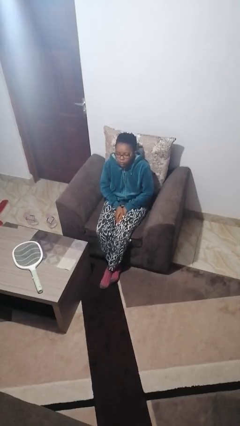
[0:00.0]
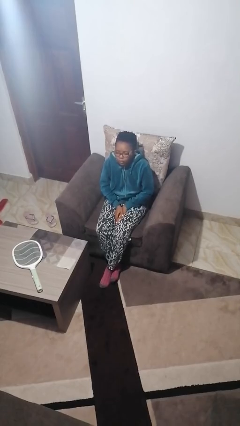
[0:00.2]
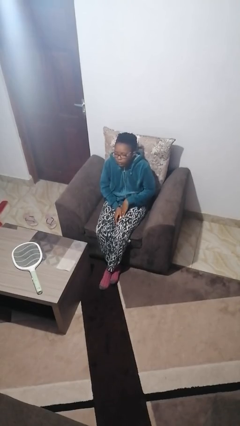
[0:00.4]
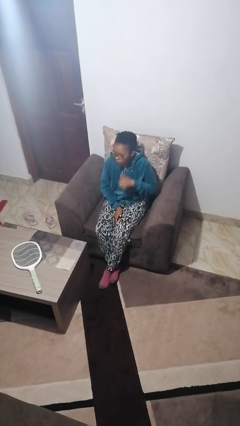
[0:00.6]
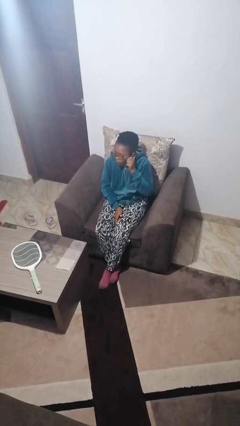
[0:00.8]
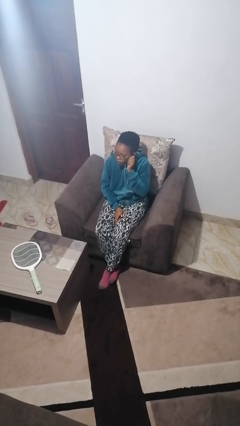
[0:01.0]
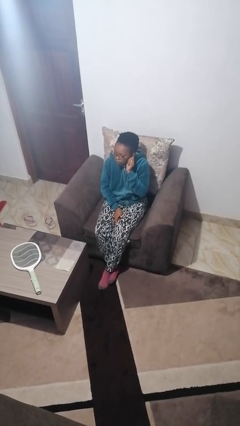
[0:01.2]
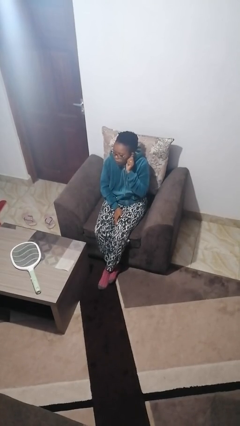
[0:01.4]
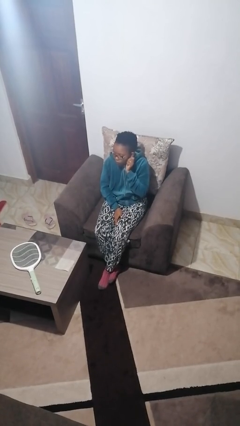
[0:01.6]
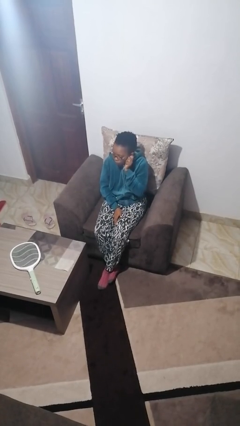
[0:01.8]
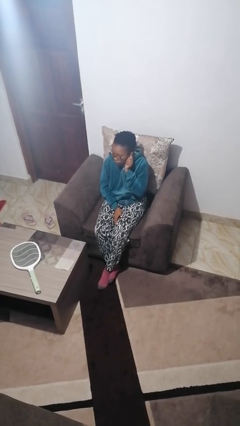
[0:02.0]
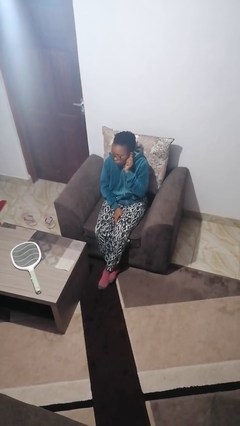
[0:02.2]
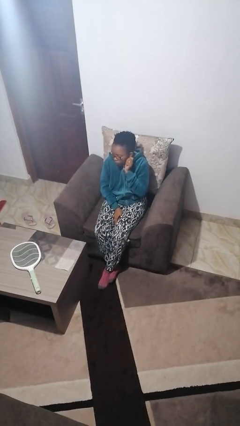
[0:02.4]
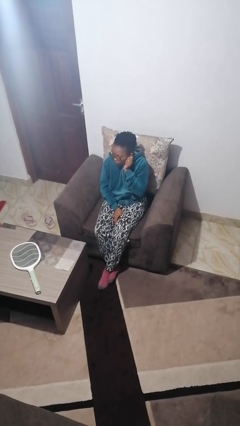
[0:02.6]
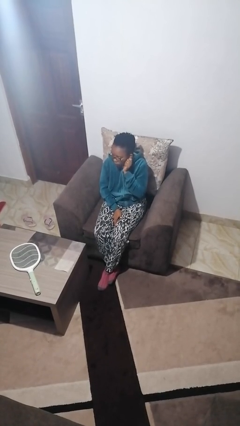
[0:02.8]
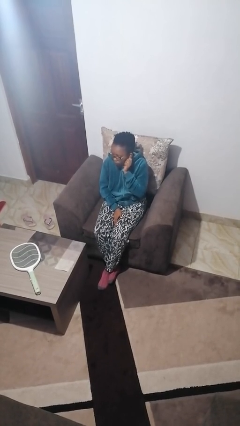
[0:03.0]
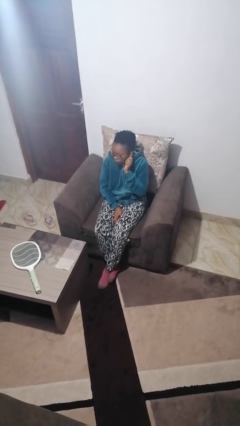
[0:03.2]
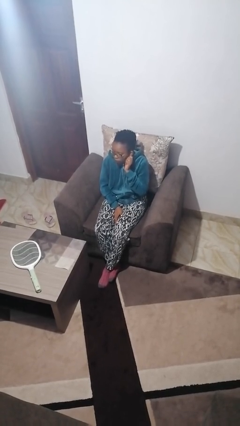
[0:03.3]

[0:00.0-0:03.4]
person touches earlobe

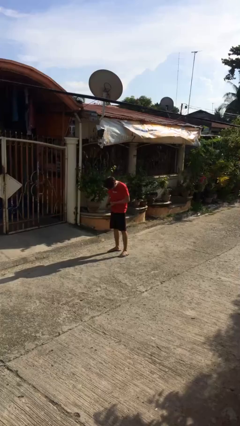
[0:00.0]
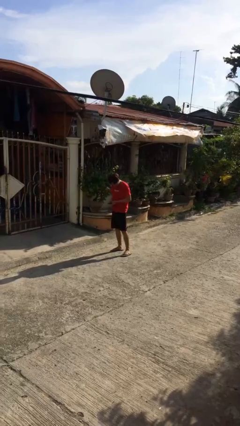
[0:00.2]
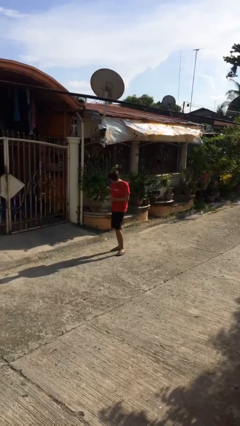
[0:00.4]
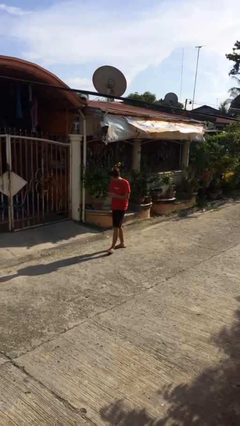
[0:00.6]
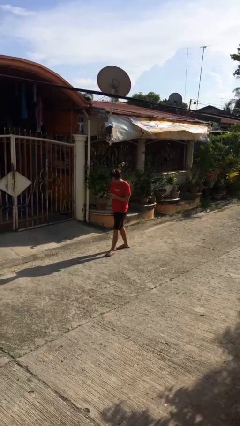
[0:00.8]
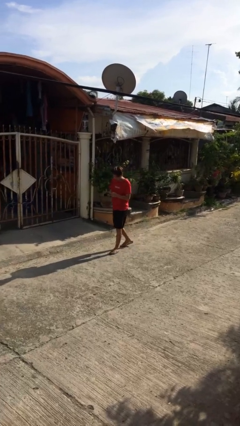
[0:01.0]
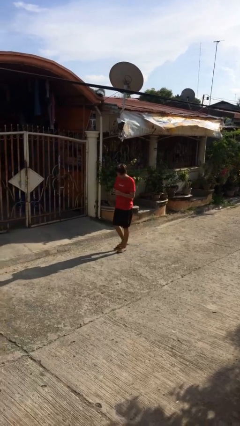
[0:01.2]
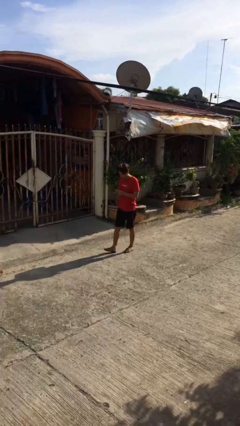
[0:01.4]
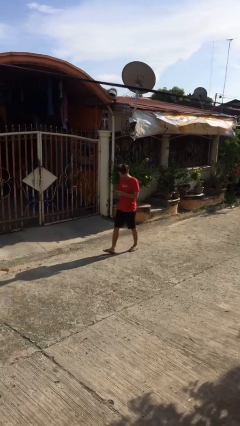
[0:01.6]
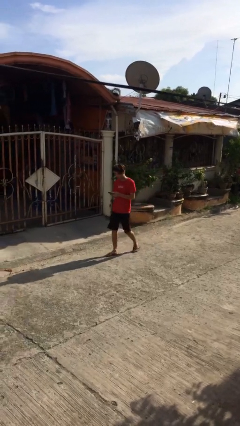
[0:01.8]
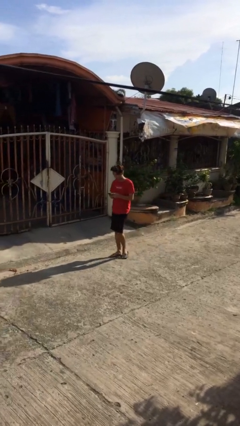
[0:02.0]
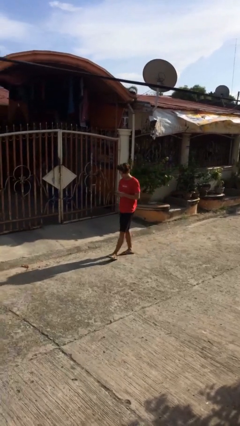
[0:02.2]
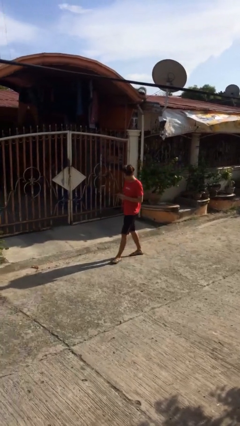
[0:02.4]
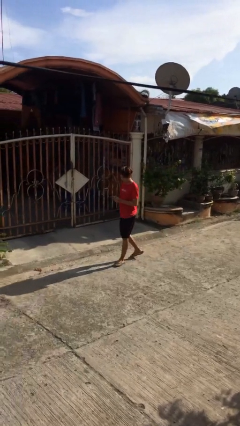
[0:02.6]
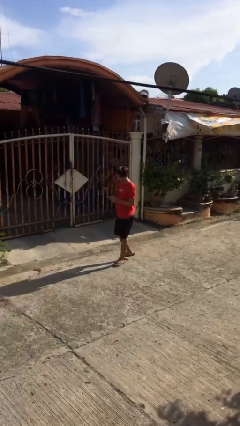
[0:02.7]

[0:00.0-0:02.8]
person texts on phone

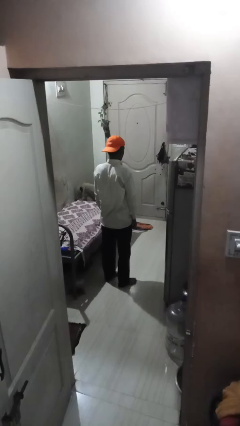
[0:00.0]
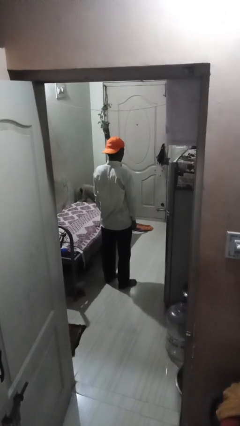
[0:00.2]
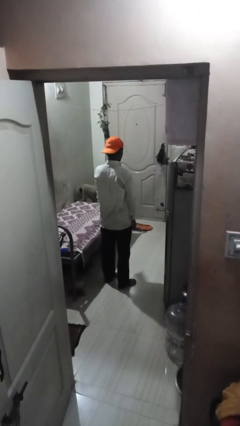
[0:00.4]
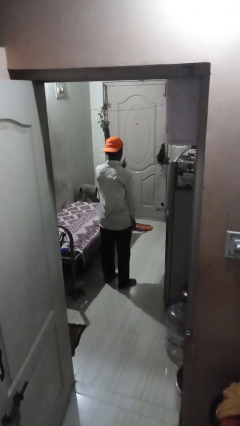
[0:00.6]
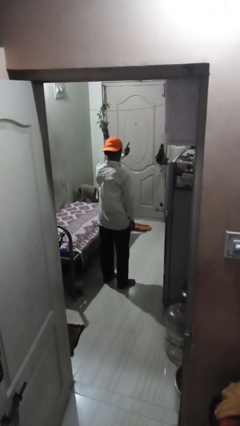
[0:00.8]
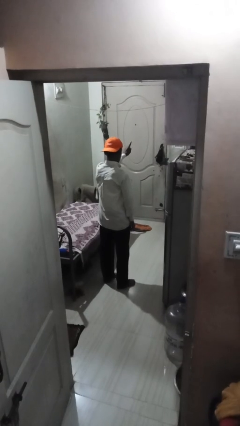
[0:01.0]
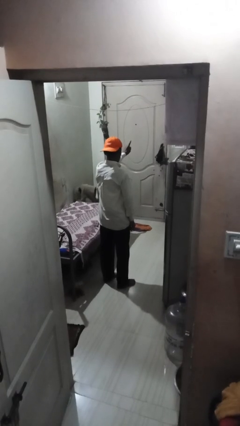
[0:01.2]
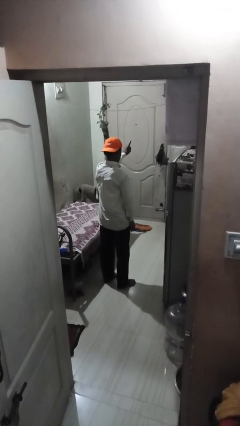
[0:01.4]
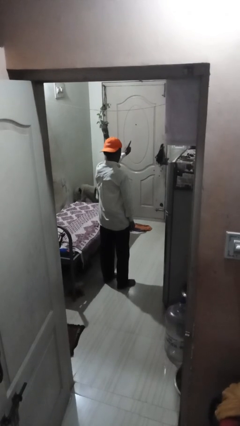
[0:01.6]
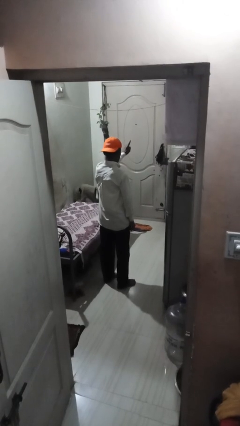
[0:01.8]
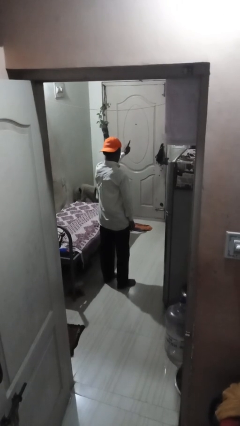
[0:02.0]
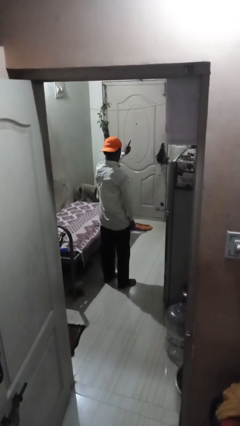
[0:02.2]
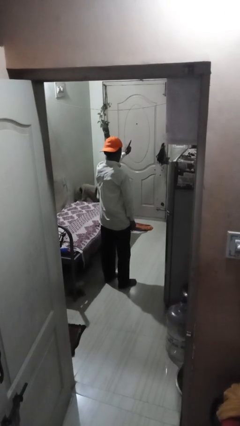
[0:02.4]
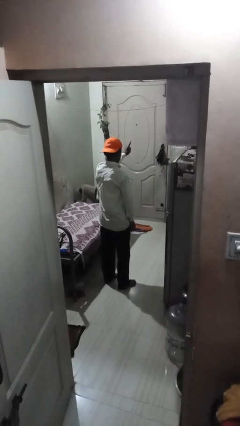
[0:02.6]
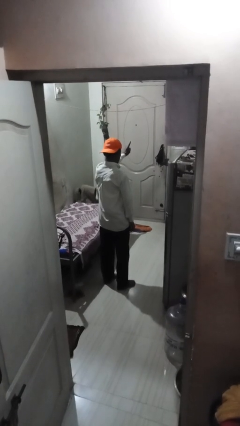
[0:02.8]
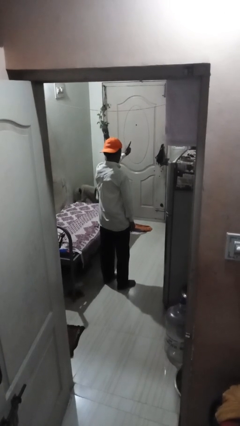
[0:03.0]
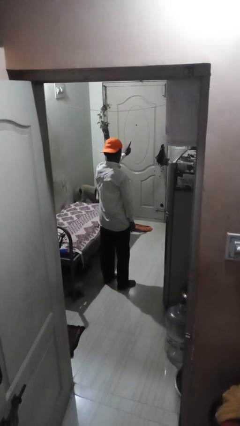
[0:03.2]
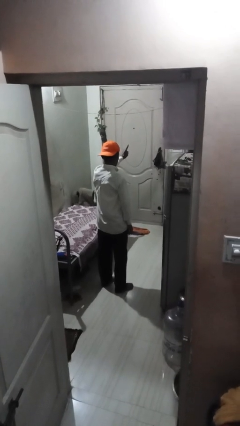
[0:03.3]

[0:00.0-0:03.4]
person points at person

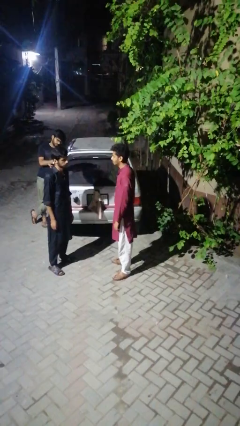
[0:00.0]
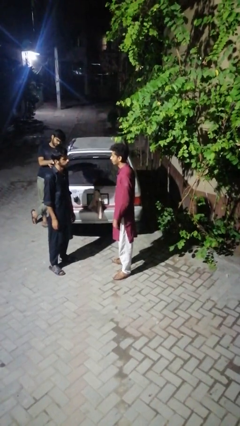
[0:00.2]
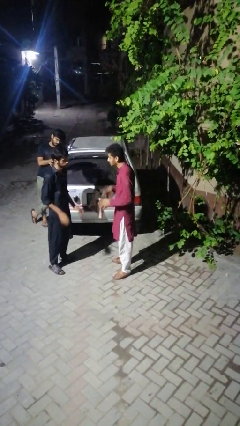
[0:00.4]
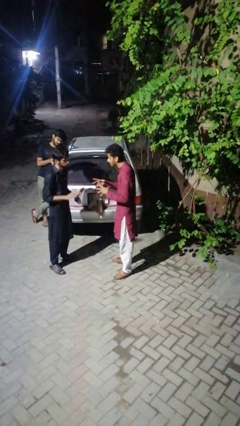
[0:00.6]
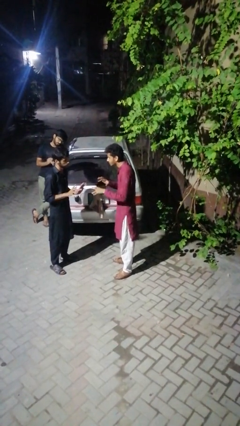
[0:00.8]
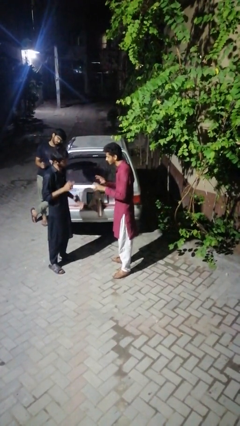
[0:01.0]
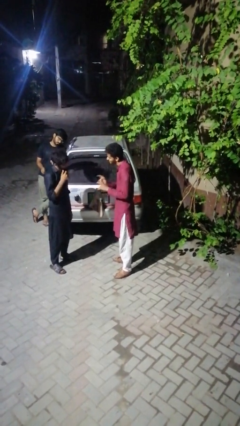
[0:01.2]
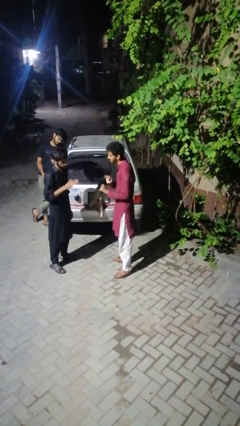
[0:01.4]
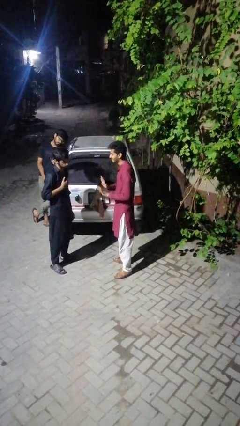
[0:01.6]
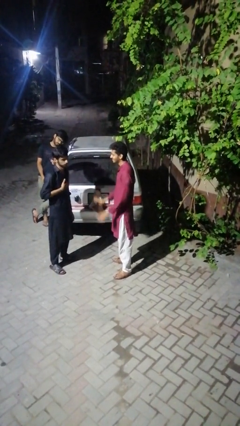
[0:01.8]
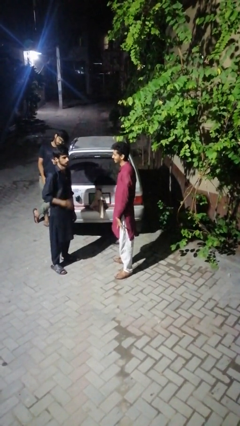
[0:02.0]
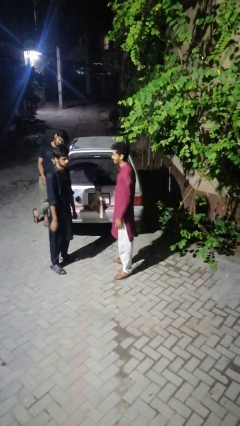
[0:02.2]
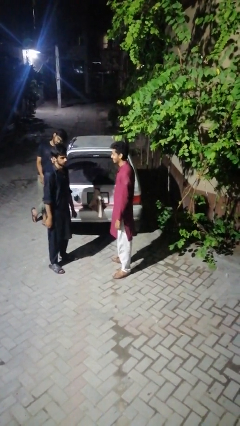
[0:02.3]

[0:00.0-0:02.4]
person talks to person

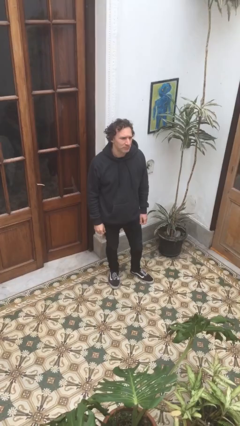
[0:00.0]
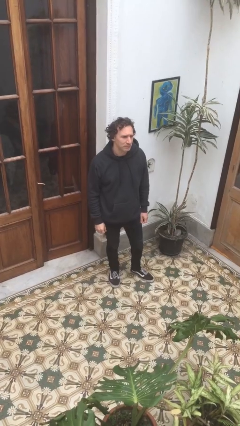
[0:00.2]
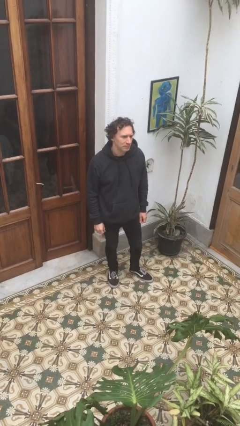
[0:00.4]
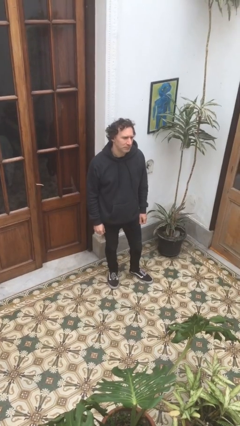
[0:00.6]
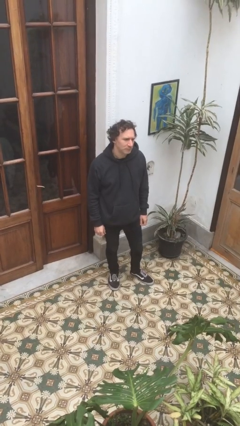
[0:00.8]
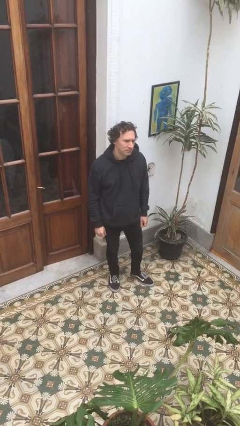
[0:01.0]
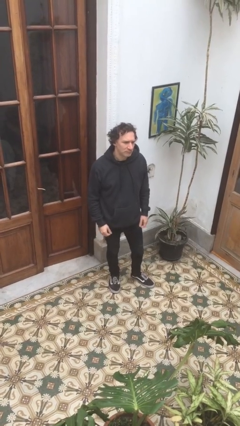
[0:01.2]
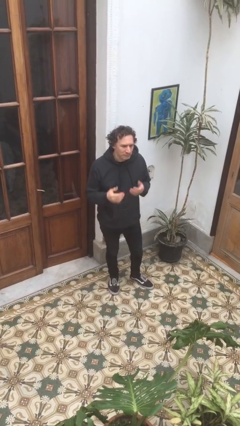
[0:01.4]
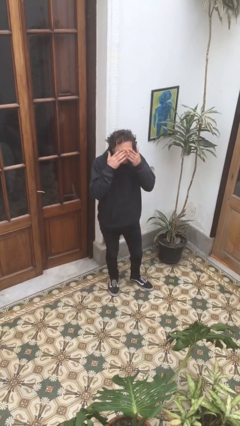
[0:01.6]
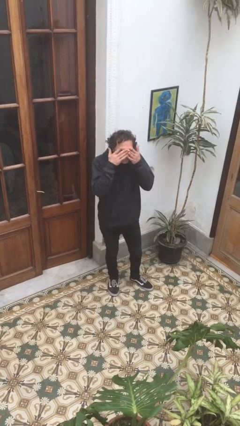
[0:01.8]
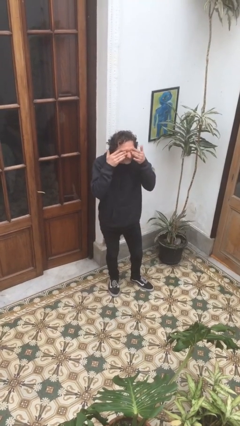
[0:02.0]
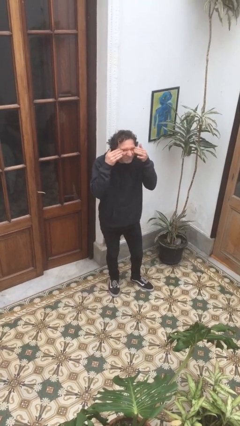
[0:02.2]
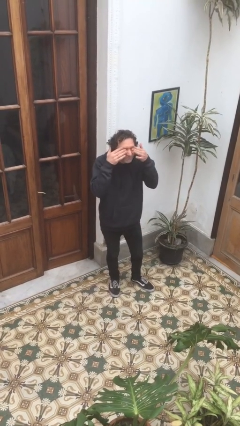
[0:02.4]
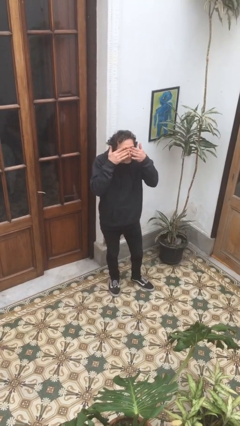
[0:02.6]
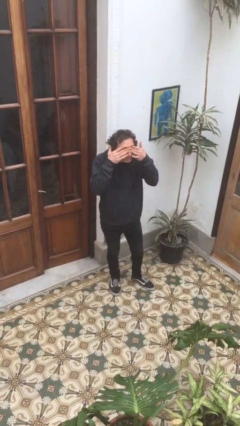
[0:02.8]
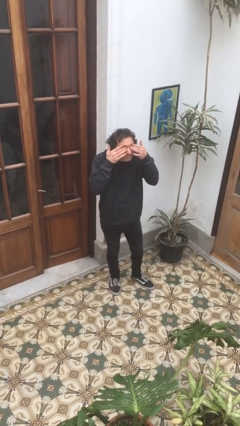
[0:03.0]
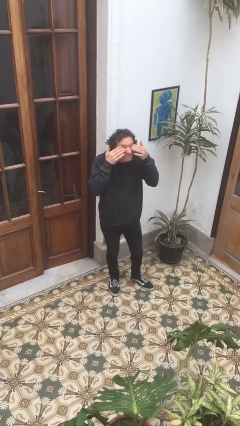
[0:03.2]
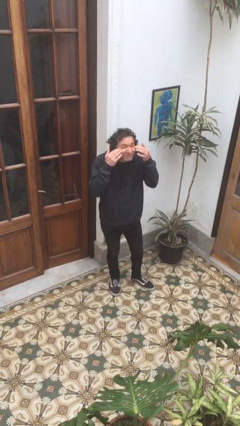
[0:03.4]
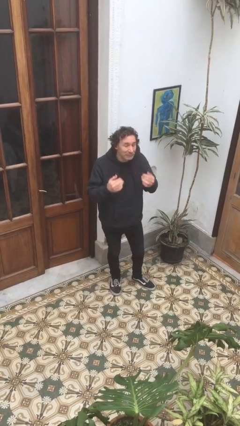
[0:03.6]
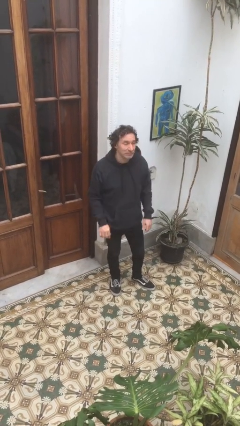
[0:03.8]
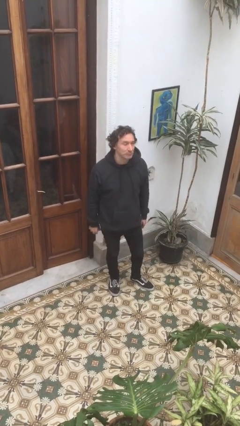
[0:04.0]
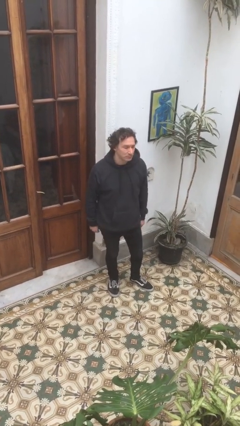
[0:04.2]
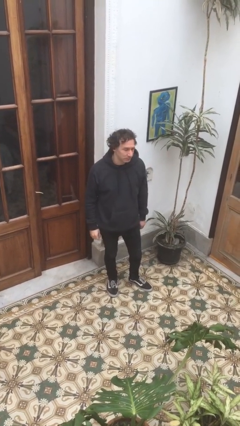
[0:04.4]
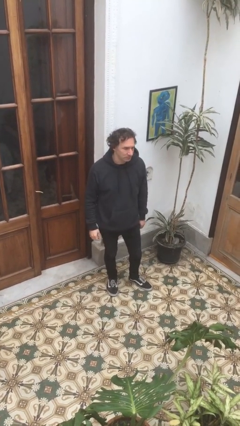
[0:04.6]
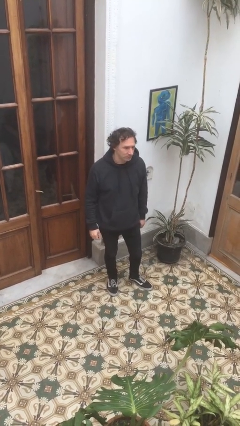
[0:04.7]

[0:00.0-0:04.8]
person rubs eyes

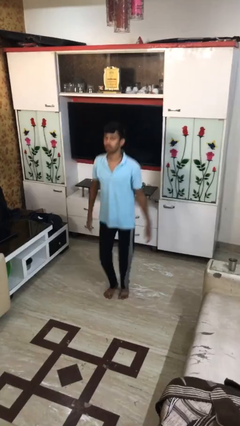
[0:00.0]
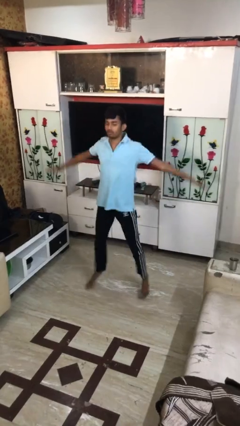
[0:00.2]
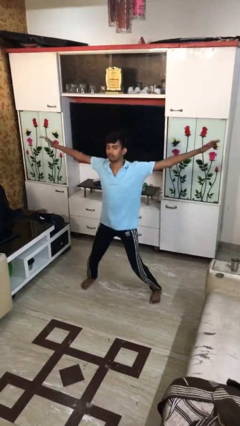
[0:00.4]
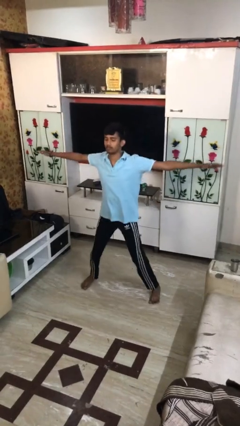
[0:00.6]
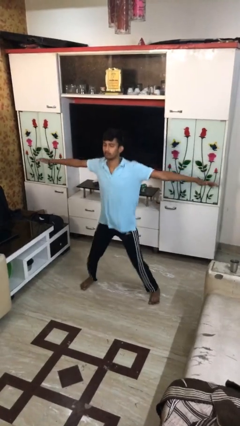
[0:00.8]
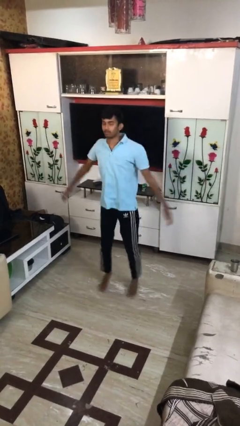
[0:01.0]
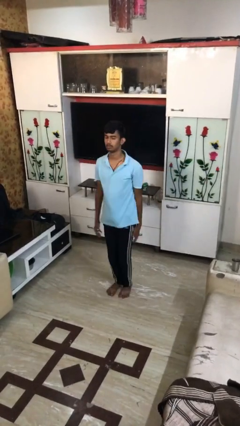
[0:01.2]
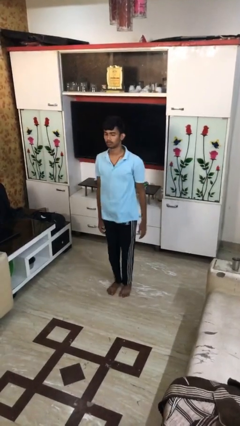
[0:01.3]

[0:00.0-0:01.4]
person exercises with jumping jacks
